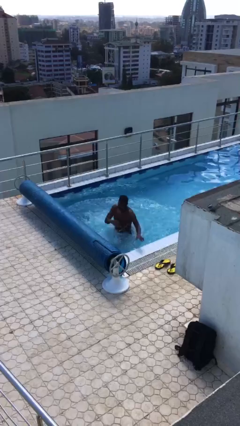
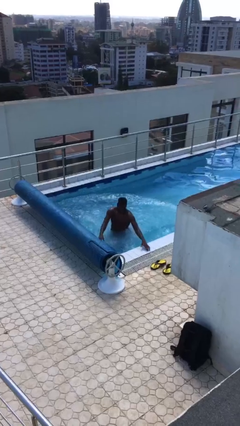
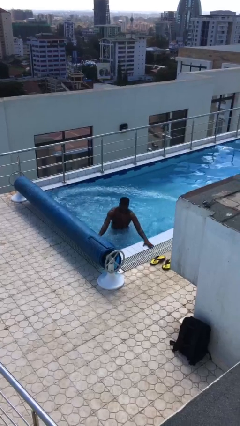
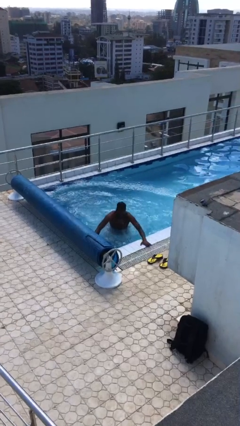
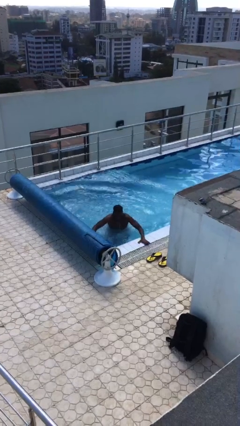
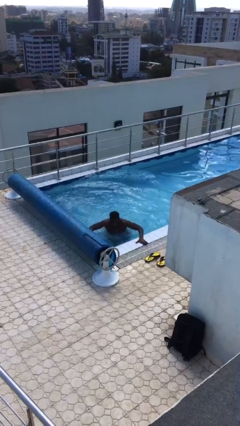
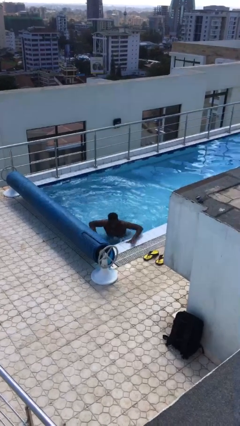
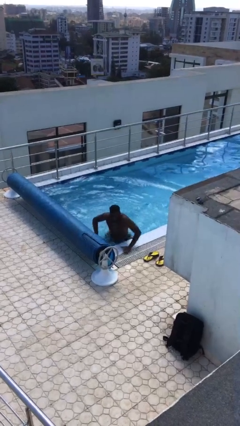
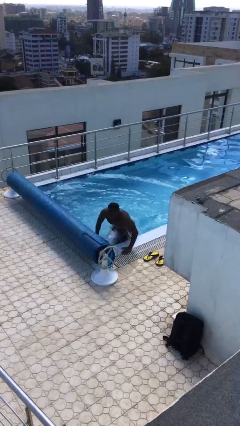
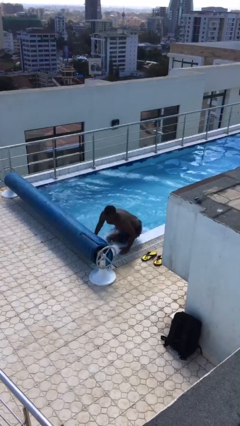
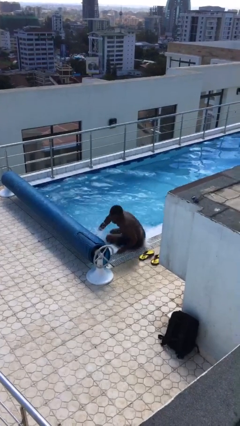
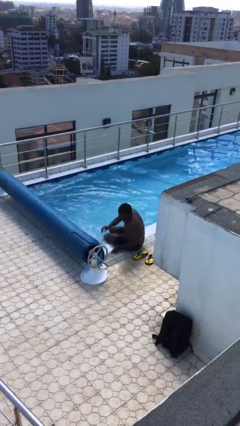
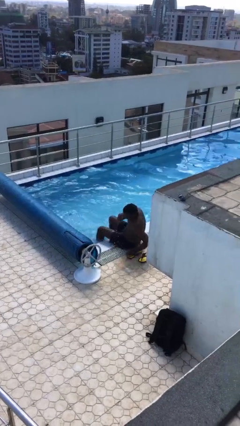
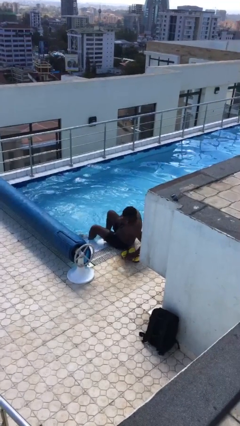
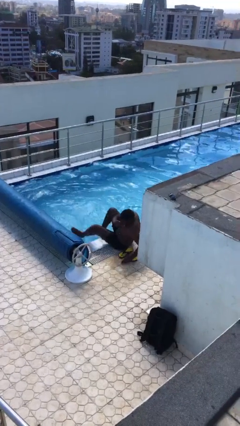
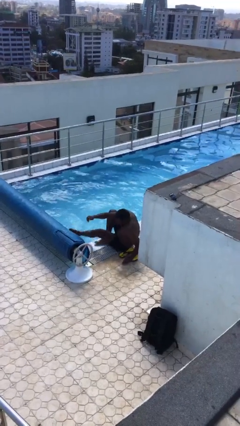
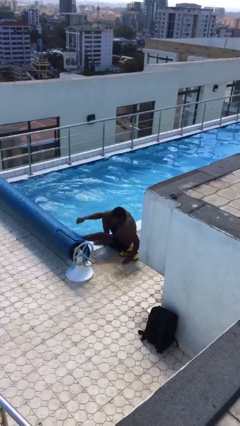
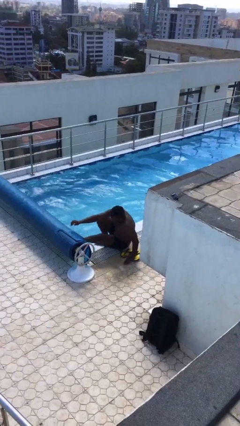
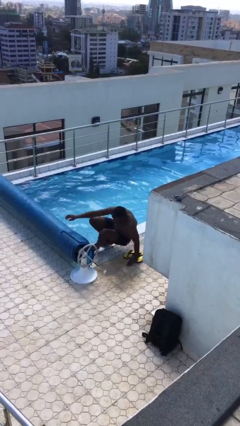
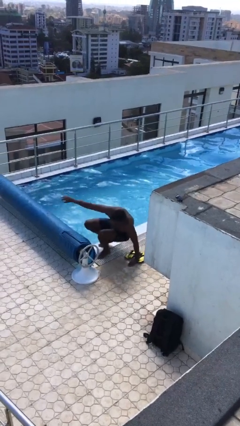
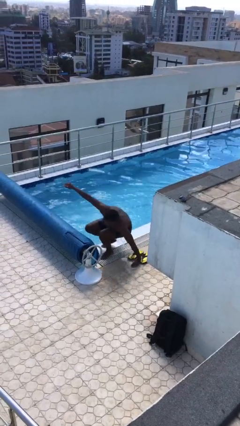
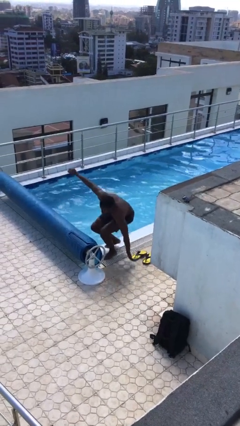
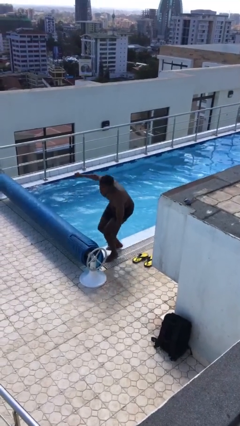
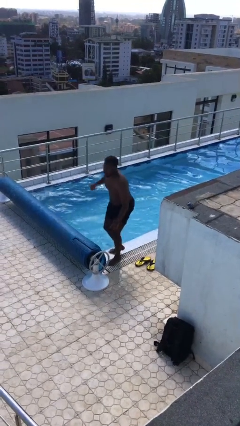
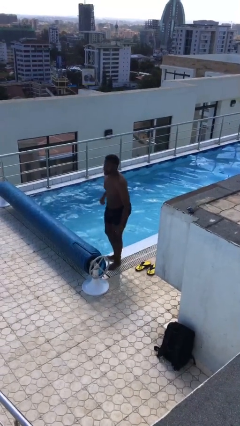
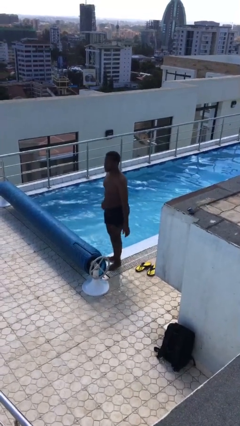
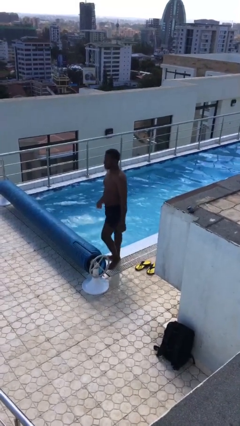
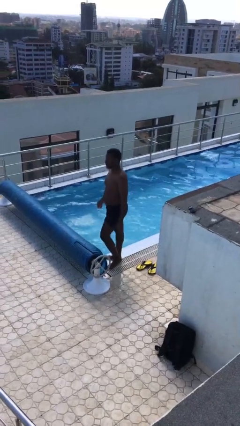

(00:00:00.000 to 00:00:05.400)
person exits pool

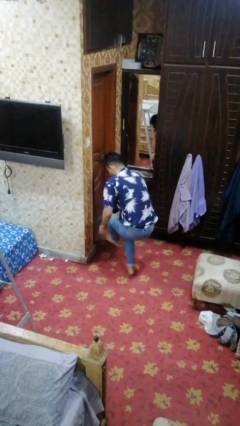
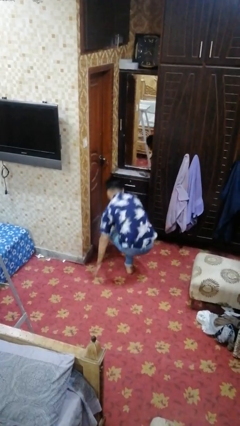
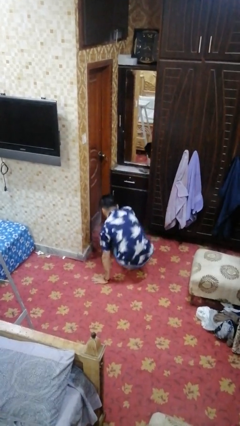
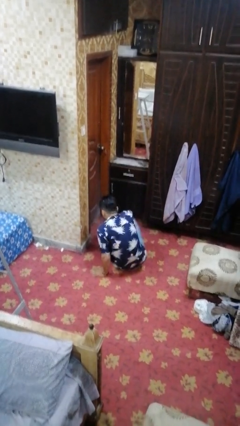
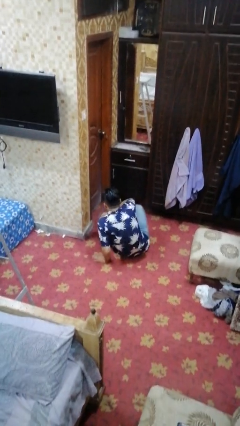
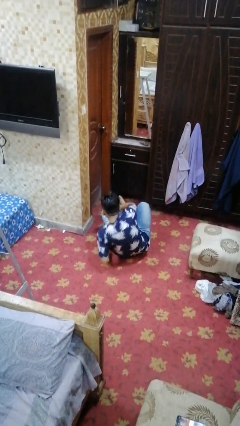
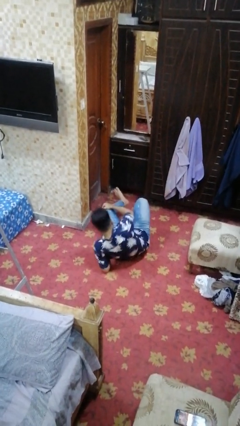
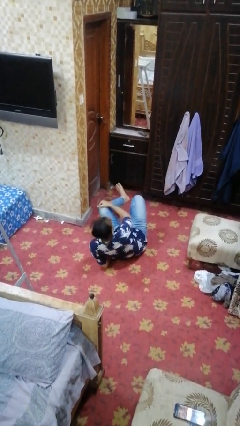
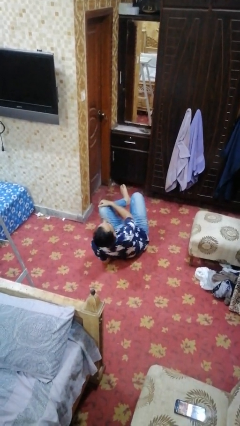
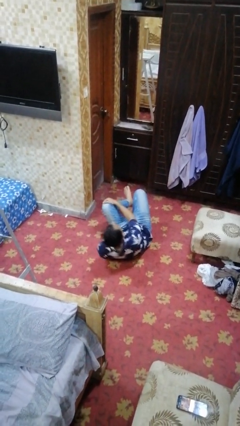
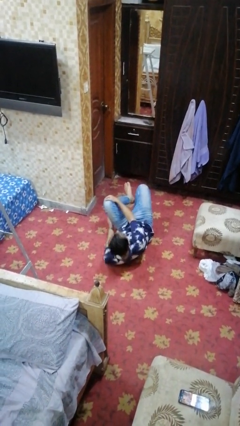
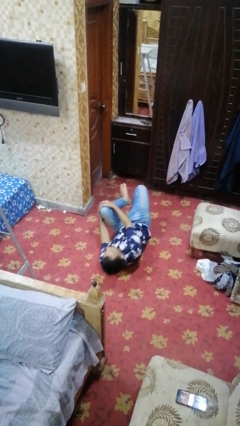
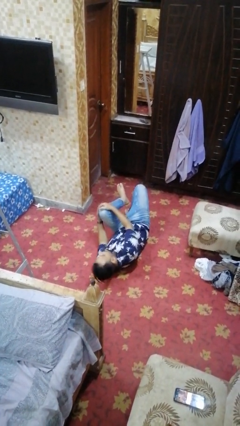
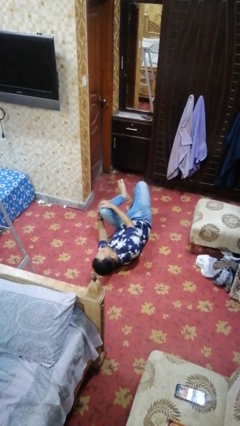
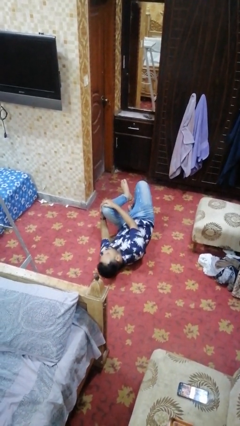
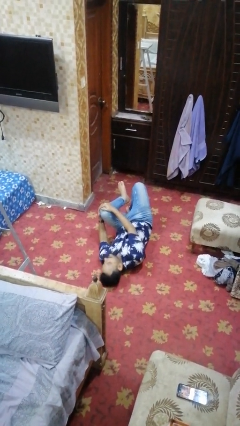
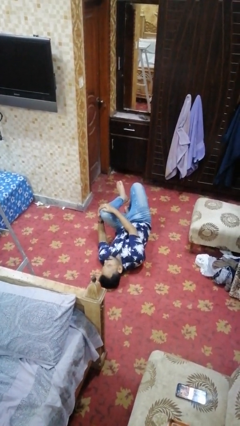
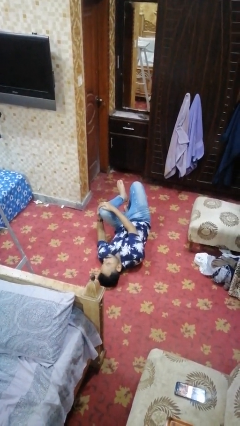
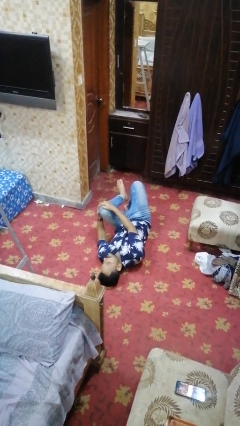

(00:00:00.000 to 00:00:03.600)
person lies down on floor

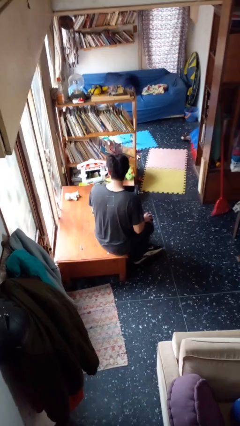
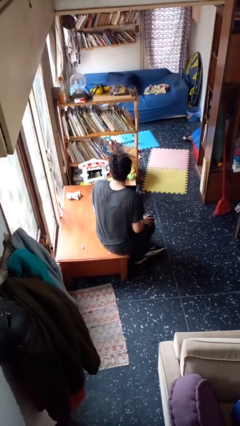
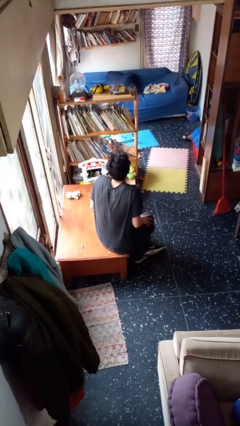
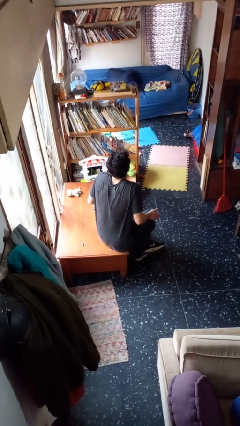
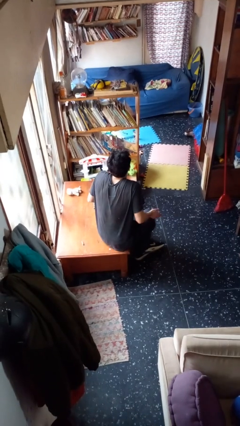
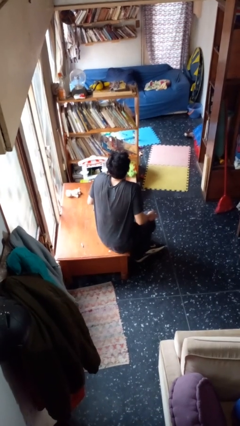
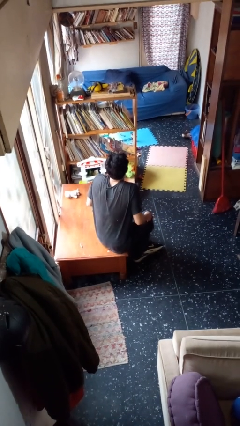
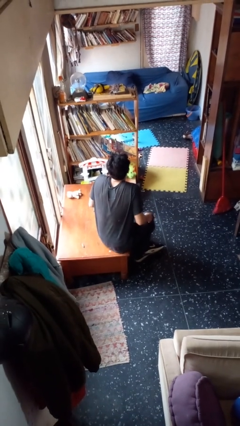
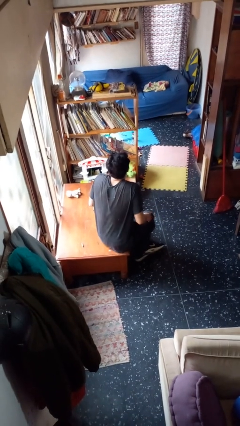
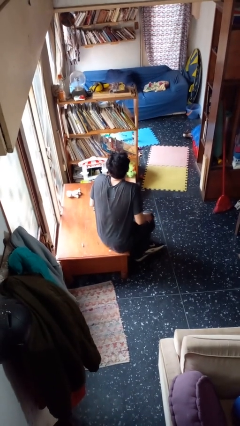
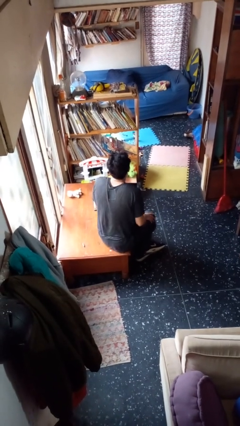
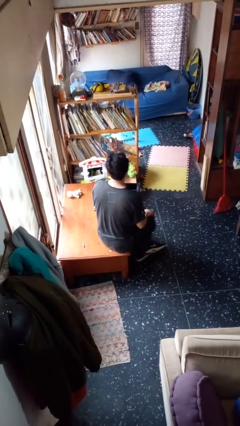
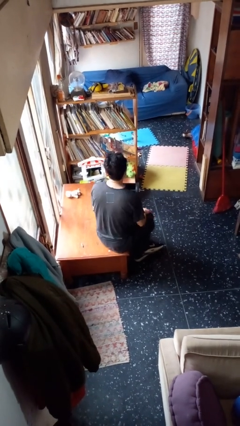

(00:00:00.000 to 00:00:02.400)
person shrugs

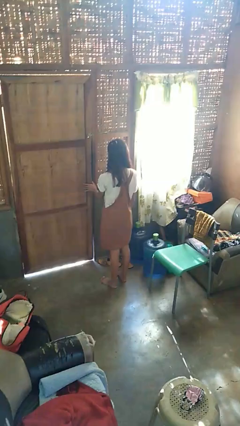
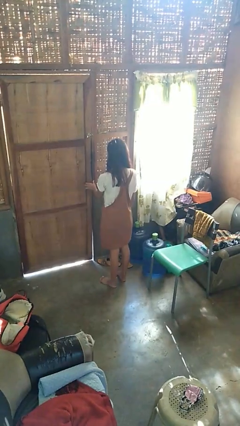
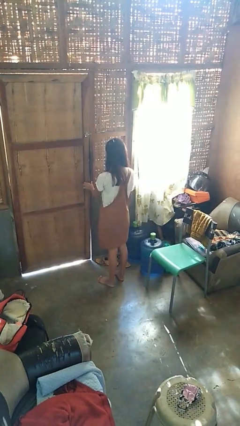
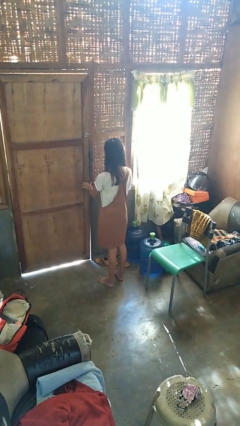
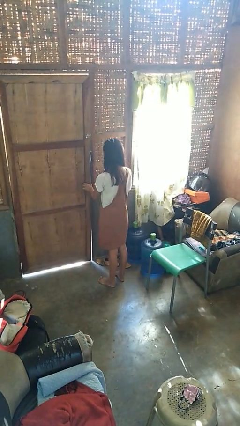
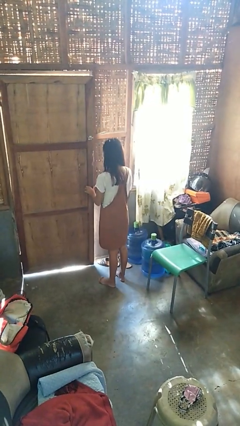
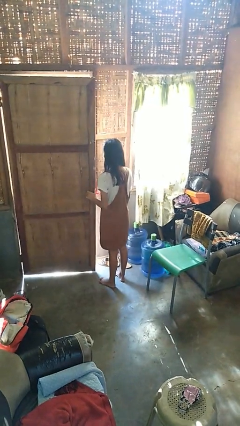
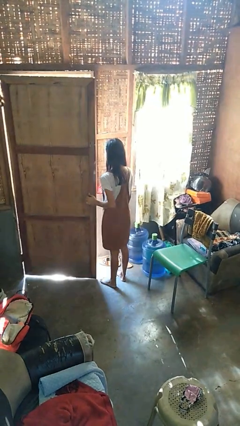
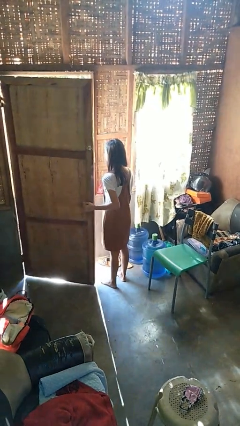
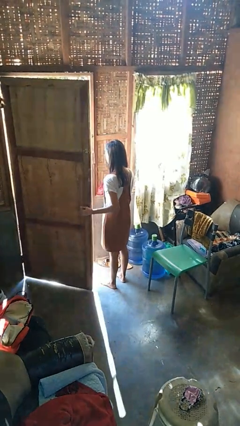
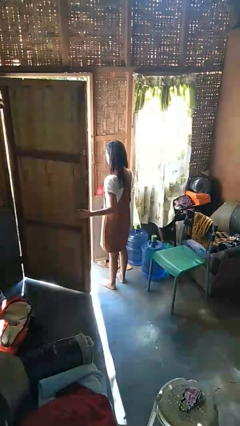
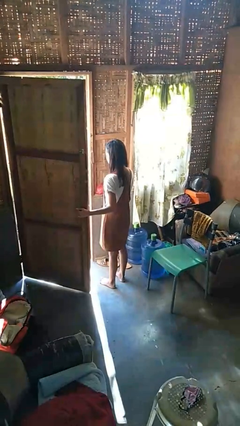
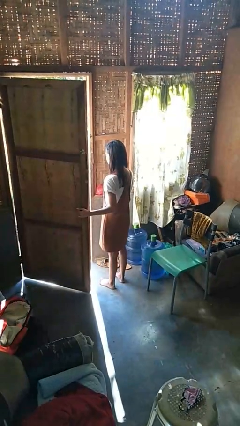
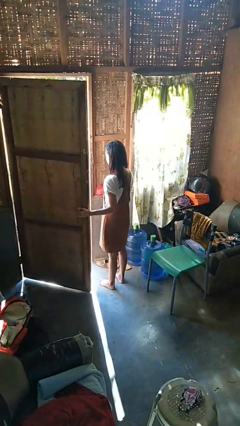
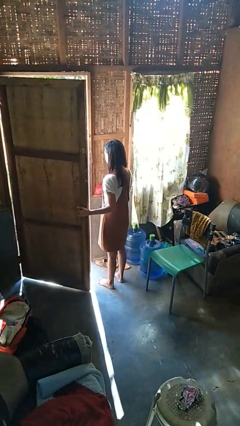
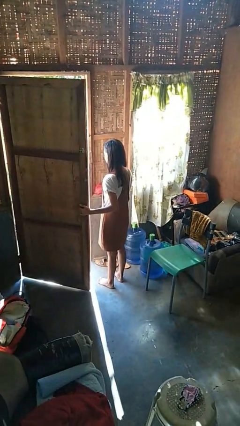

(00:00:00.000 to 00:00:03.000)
person opens facility door

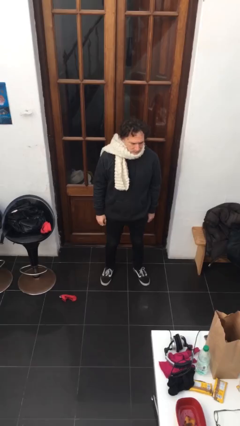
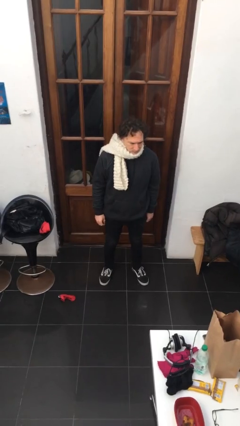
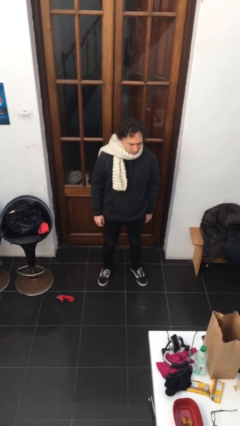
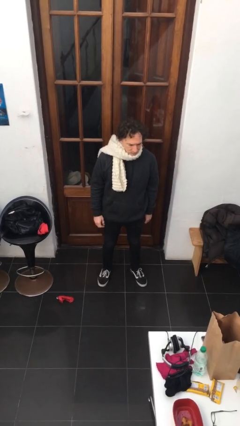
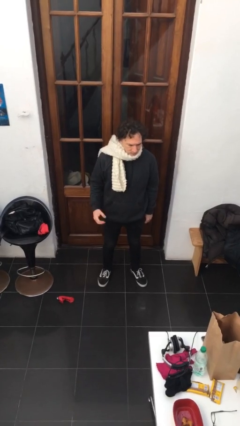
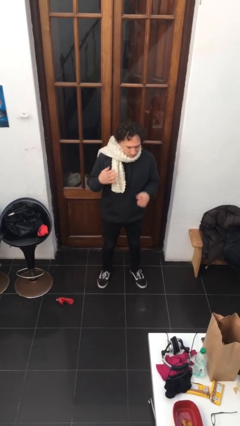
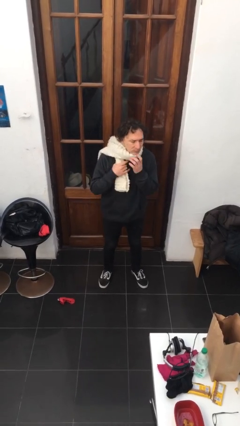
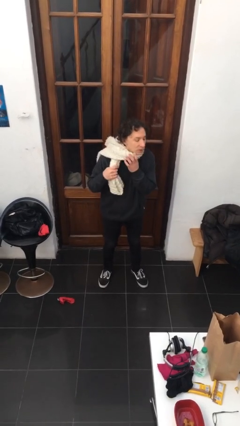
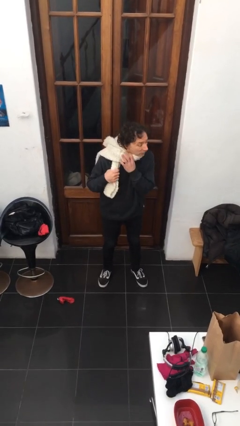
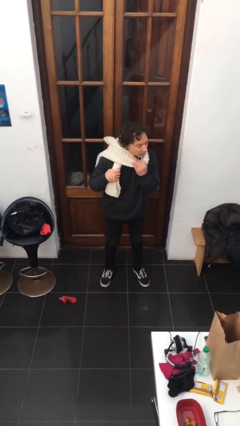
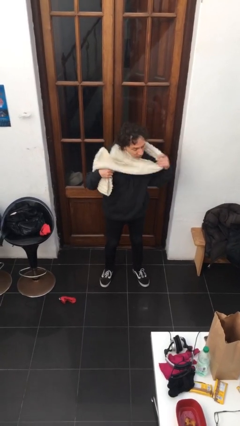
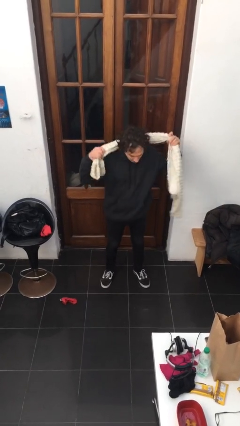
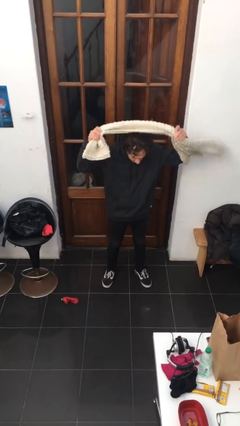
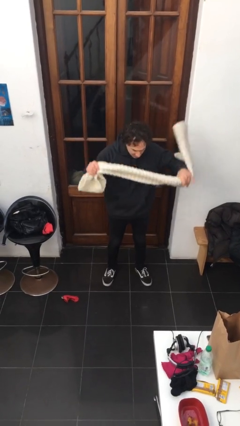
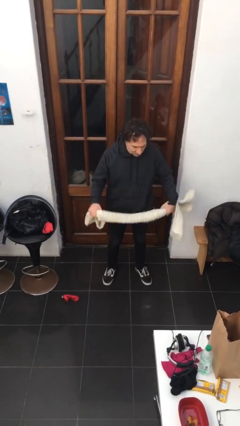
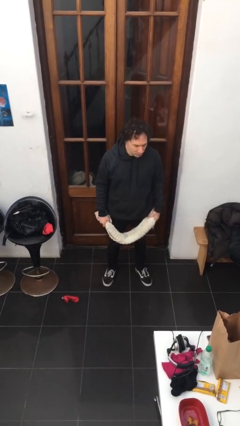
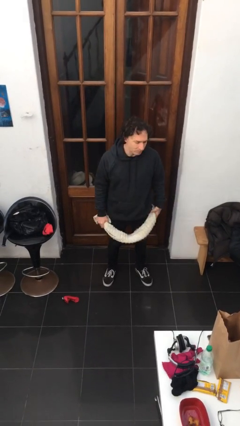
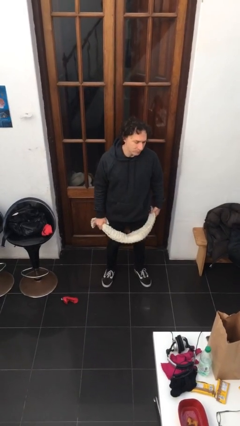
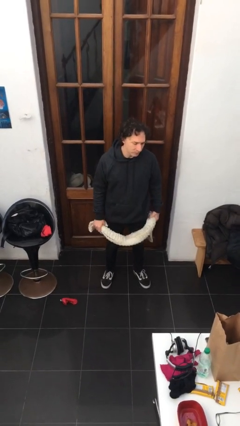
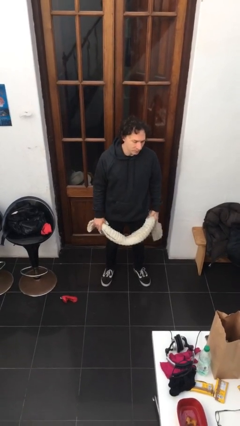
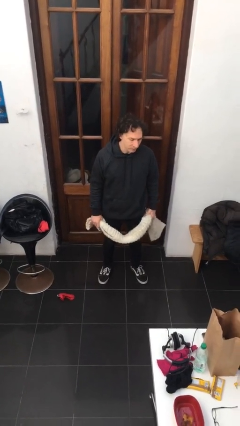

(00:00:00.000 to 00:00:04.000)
person takes off scarf
